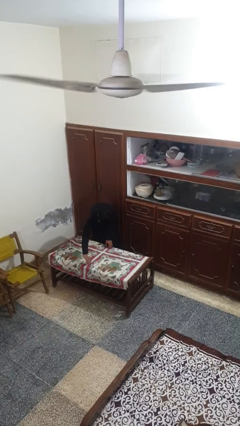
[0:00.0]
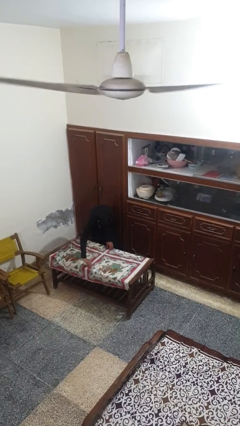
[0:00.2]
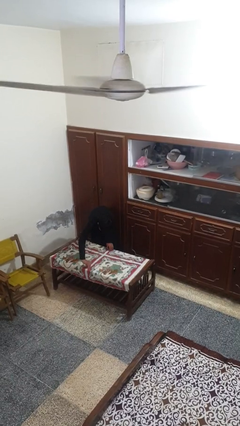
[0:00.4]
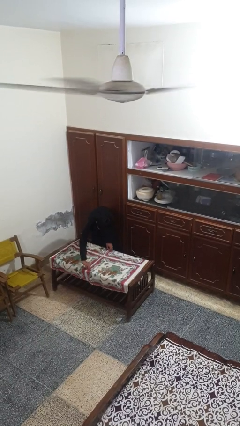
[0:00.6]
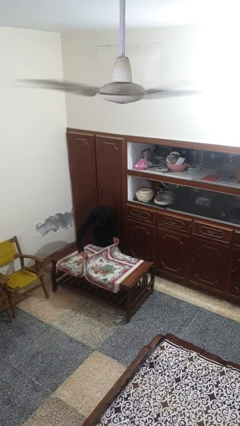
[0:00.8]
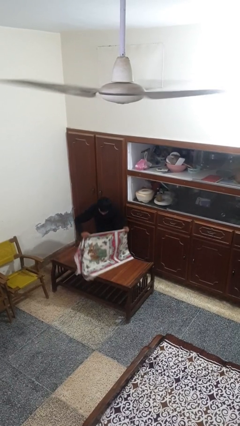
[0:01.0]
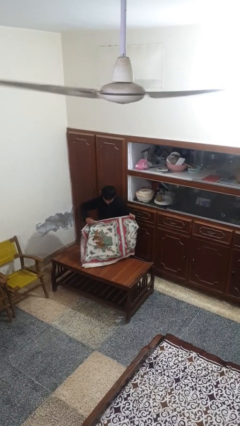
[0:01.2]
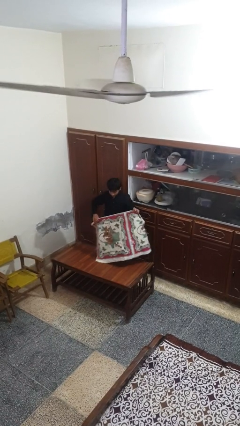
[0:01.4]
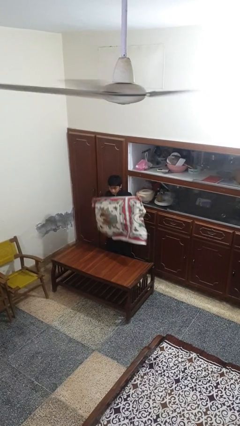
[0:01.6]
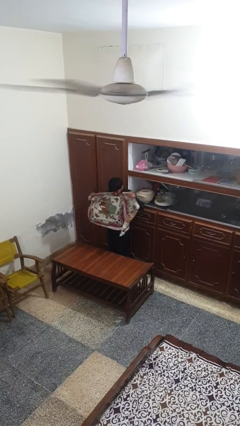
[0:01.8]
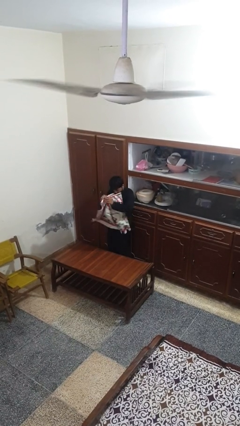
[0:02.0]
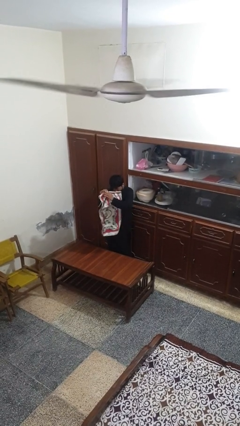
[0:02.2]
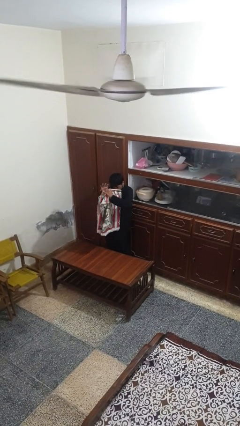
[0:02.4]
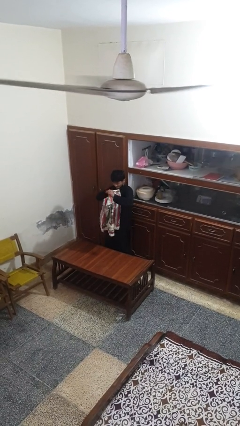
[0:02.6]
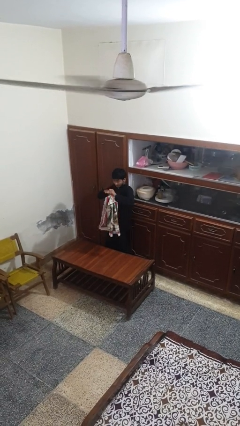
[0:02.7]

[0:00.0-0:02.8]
person folds tablecloth

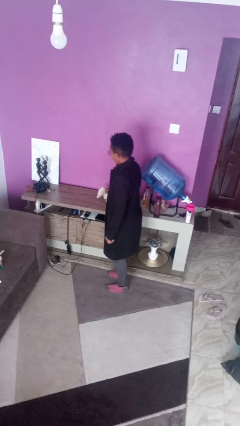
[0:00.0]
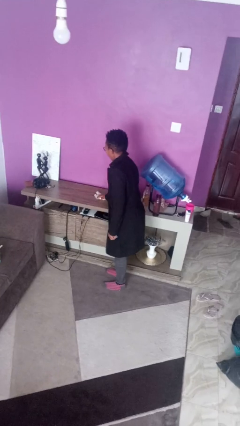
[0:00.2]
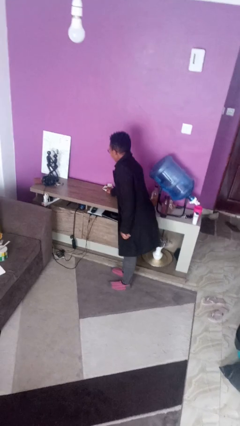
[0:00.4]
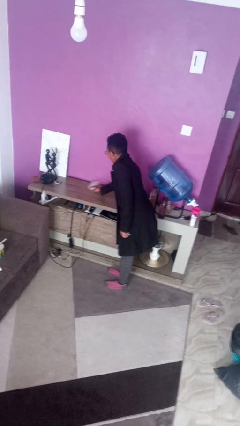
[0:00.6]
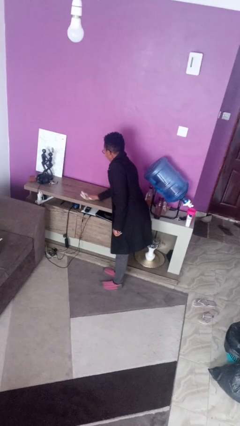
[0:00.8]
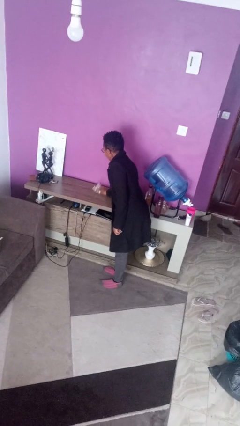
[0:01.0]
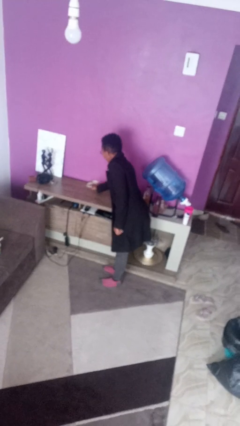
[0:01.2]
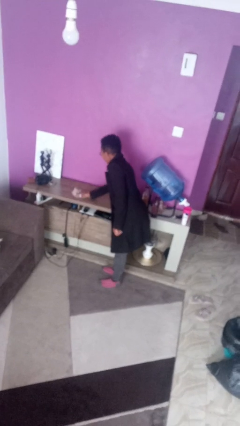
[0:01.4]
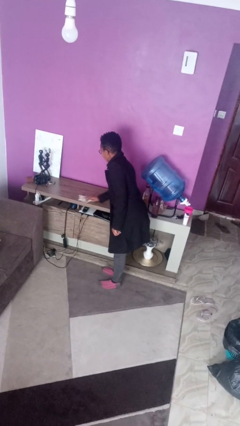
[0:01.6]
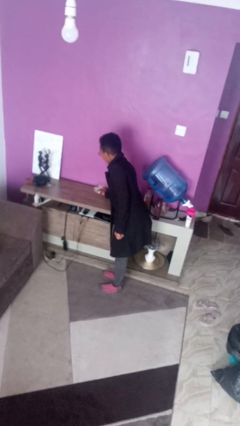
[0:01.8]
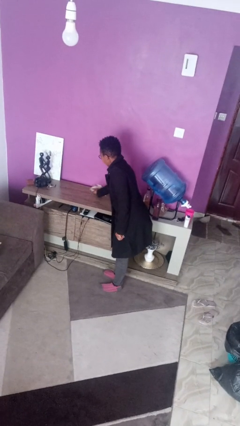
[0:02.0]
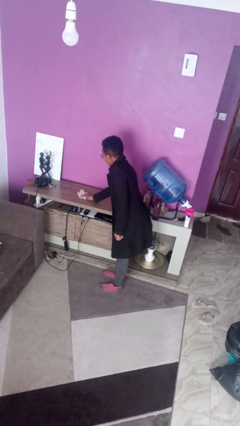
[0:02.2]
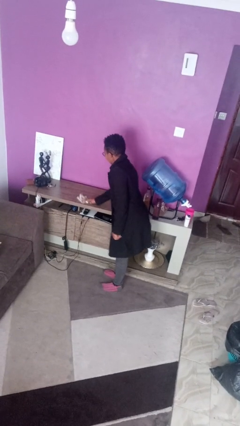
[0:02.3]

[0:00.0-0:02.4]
person cleans table with rag

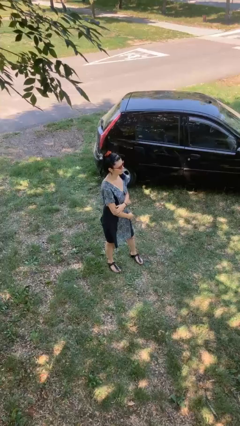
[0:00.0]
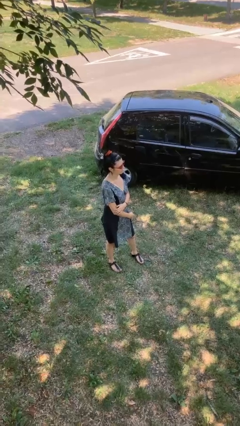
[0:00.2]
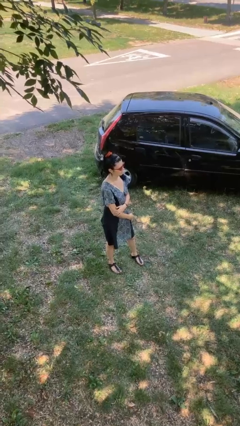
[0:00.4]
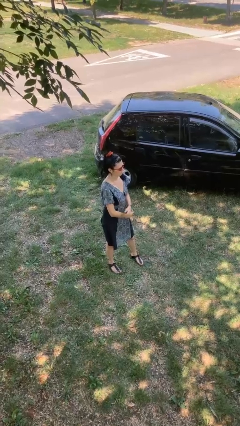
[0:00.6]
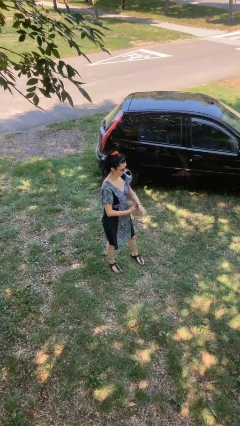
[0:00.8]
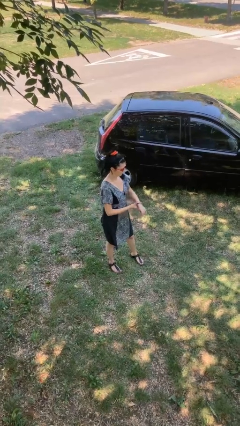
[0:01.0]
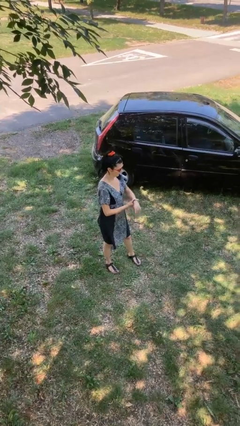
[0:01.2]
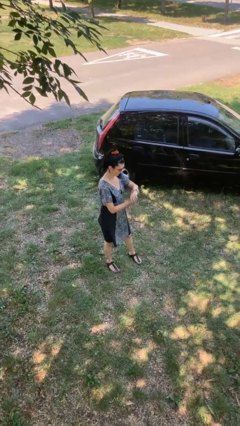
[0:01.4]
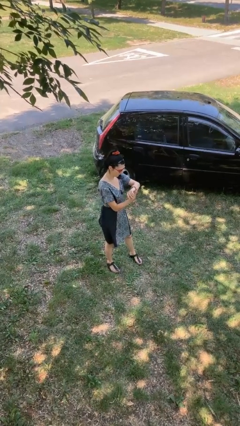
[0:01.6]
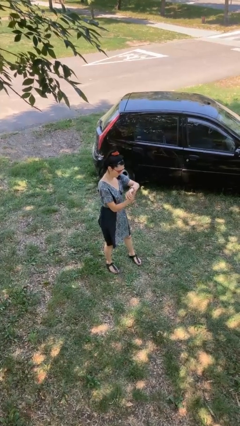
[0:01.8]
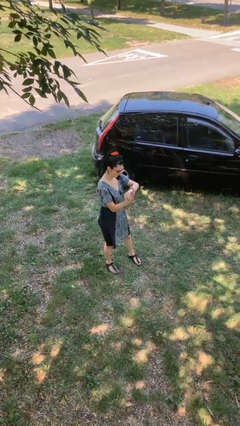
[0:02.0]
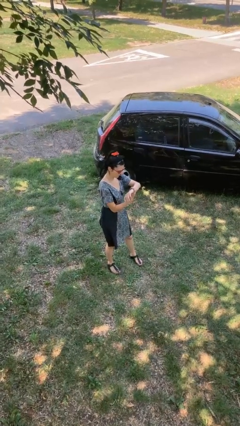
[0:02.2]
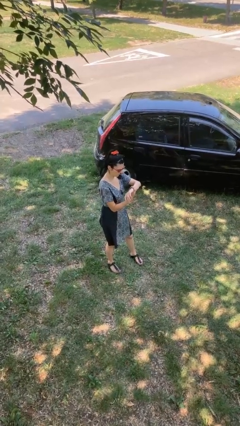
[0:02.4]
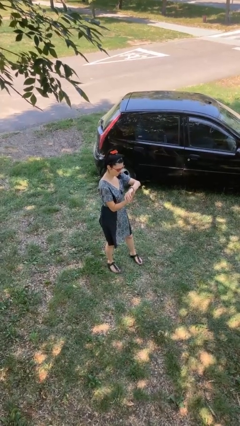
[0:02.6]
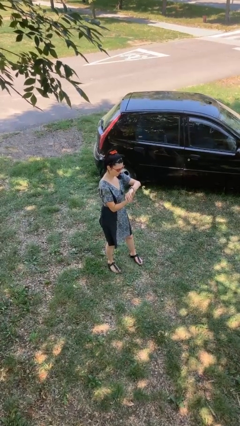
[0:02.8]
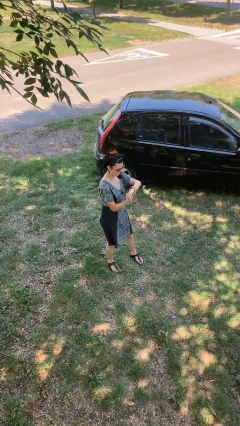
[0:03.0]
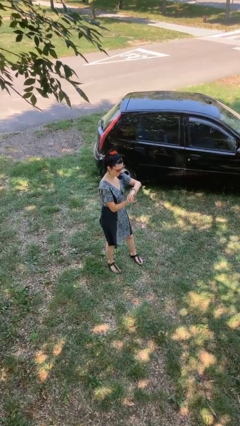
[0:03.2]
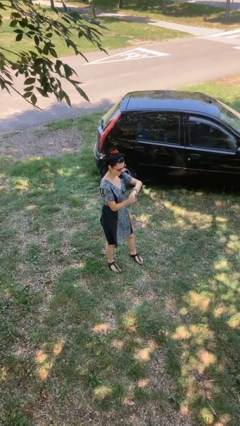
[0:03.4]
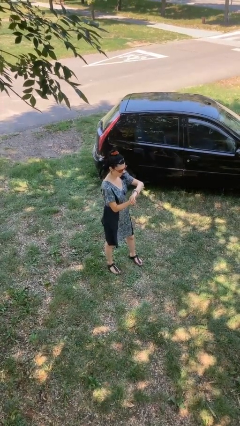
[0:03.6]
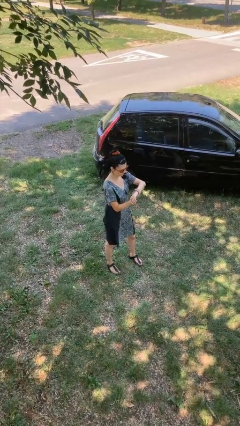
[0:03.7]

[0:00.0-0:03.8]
person looks at wristwatch

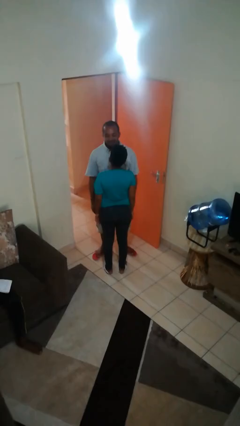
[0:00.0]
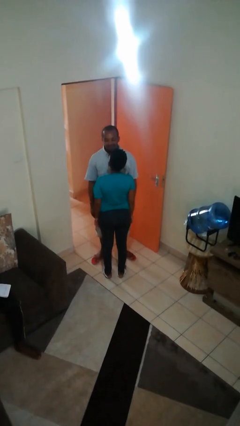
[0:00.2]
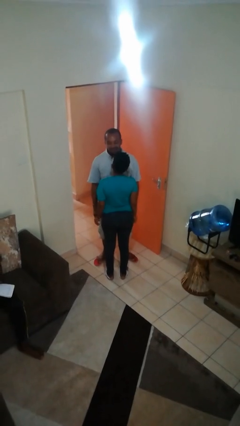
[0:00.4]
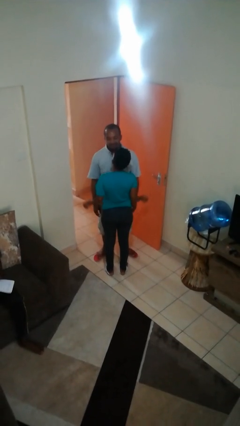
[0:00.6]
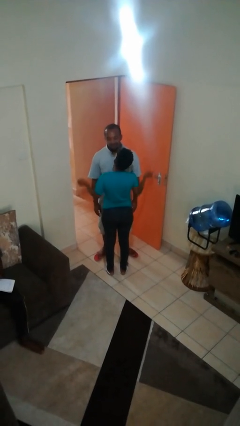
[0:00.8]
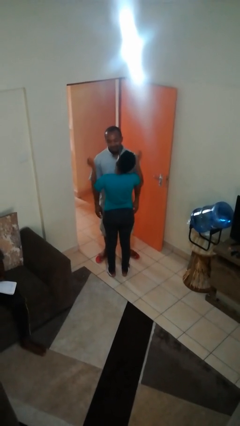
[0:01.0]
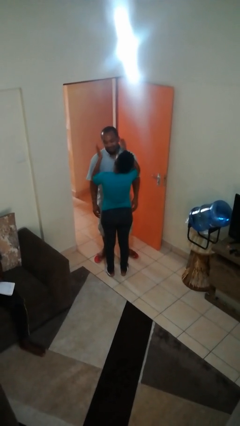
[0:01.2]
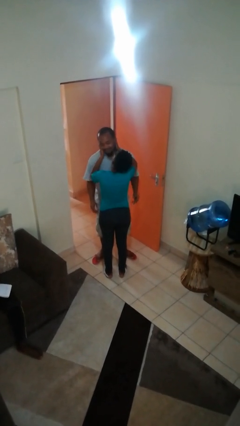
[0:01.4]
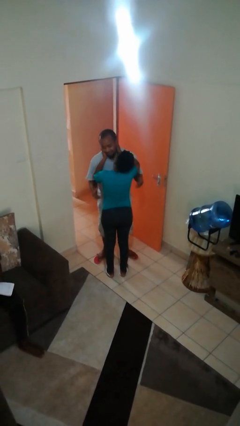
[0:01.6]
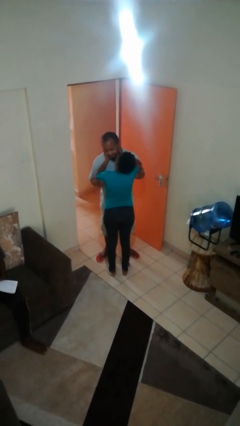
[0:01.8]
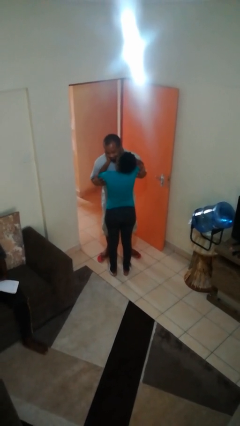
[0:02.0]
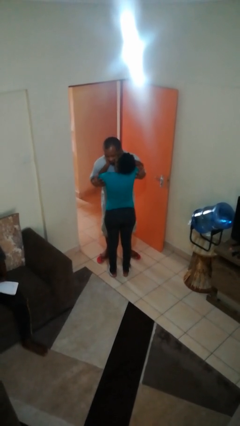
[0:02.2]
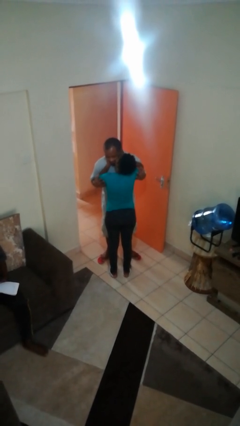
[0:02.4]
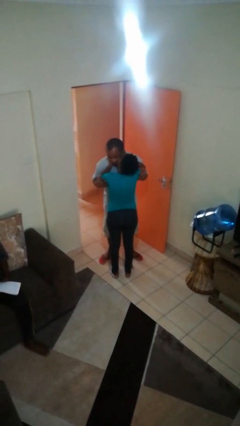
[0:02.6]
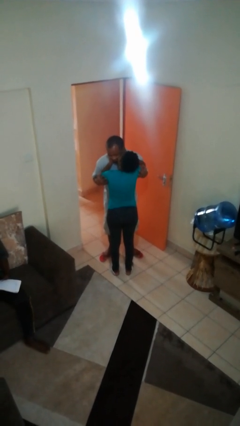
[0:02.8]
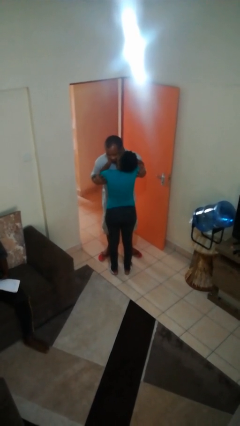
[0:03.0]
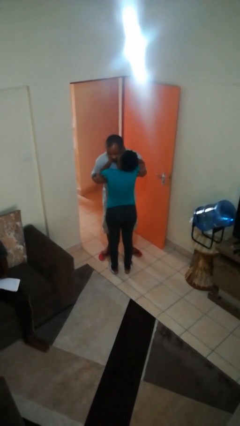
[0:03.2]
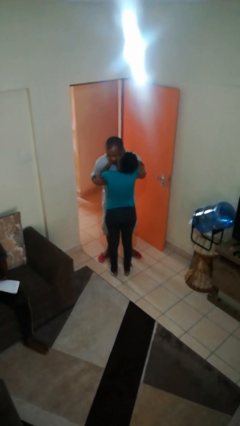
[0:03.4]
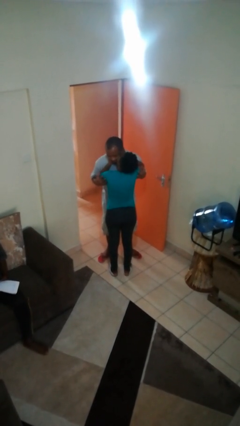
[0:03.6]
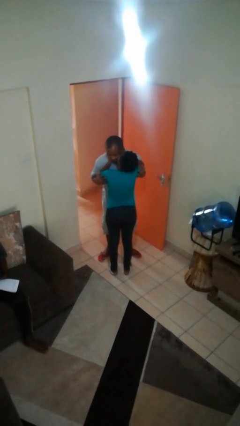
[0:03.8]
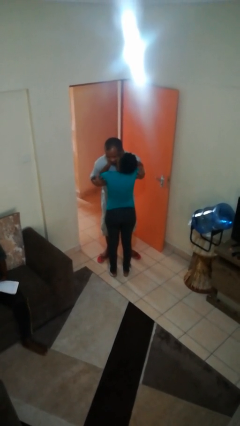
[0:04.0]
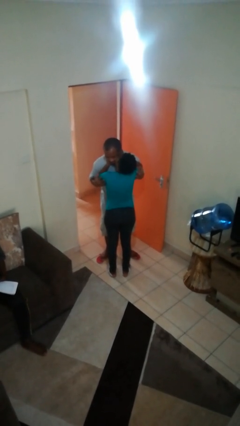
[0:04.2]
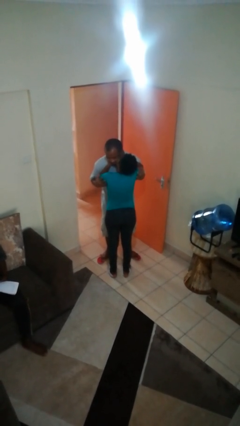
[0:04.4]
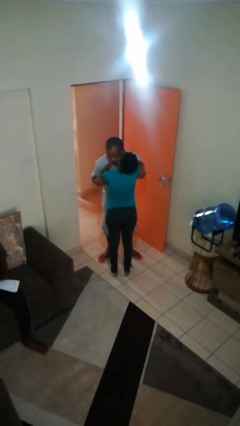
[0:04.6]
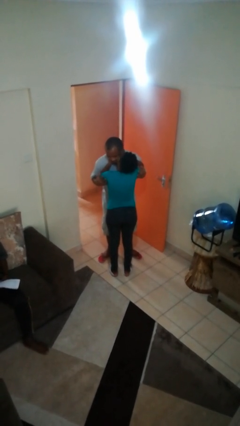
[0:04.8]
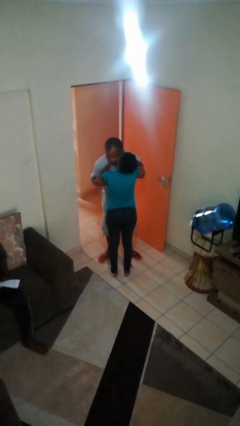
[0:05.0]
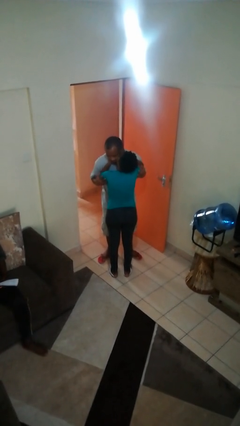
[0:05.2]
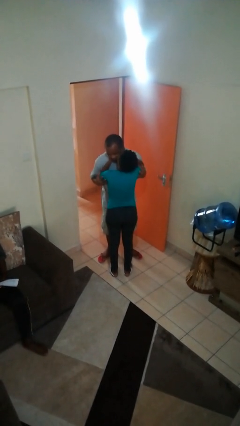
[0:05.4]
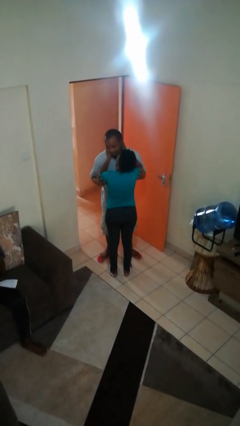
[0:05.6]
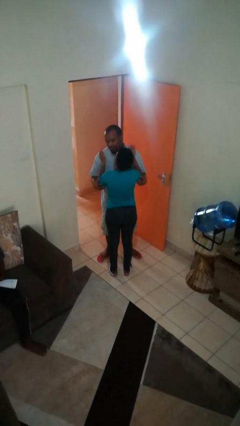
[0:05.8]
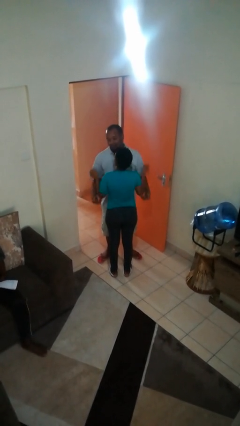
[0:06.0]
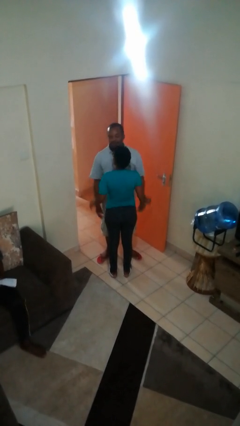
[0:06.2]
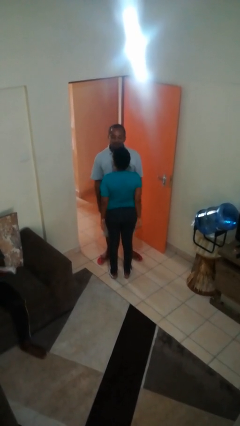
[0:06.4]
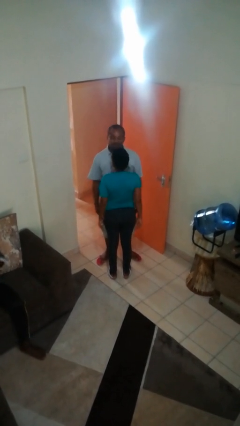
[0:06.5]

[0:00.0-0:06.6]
person kisses cheek of person

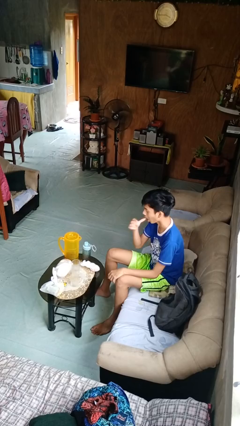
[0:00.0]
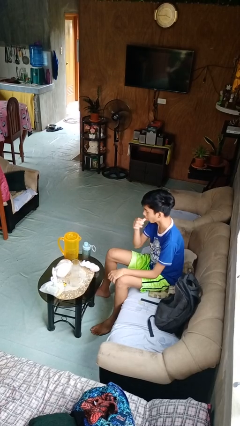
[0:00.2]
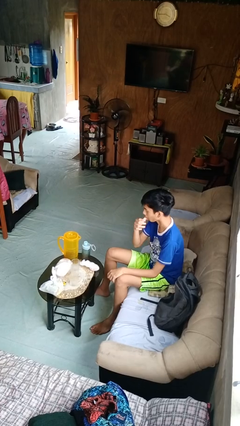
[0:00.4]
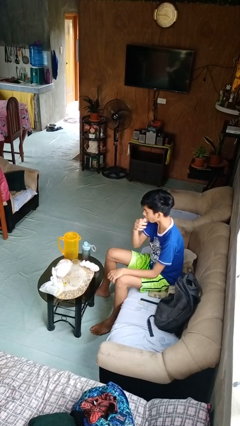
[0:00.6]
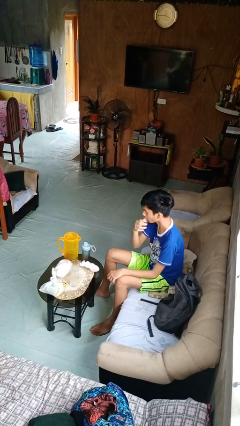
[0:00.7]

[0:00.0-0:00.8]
person licks fingers

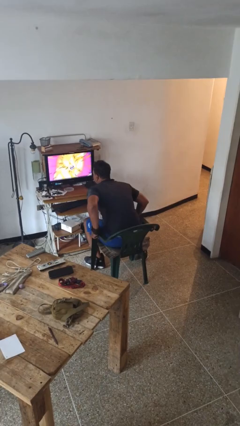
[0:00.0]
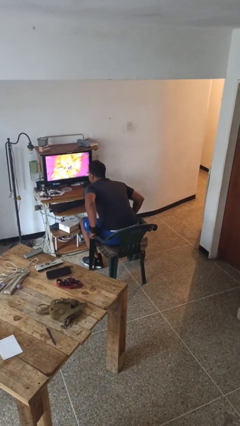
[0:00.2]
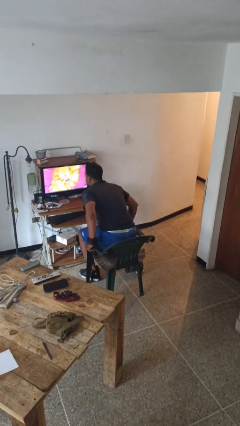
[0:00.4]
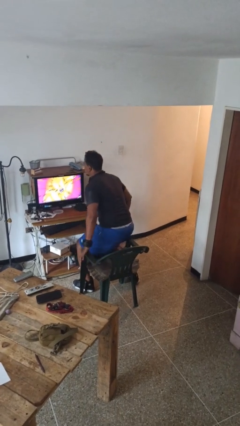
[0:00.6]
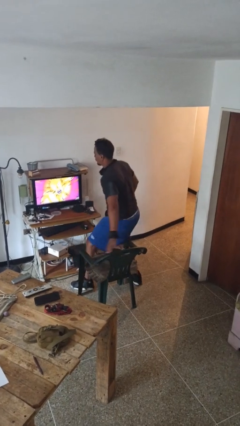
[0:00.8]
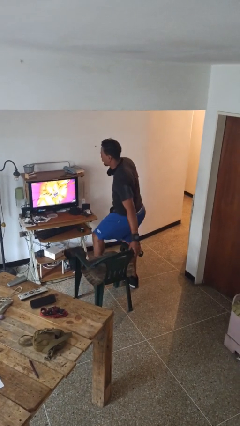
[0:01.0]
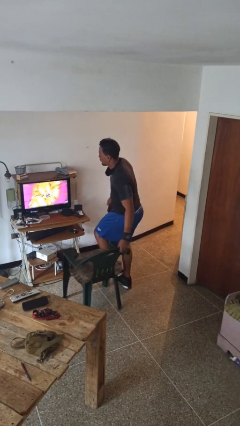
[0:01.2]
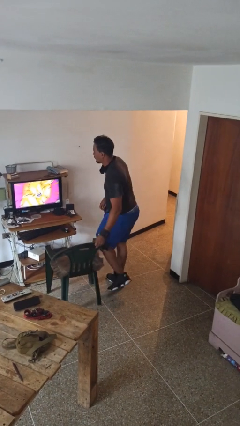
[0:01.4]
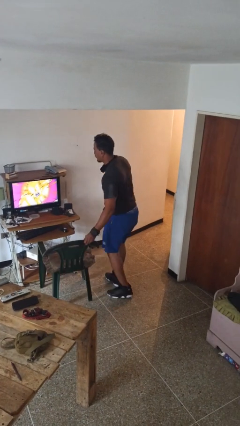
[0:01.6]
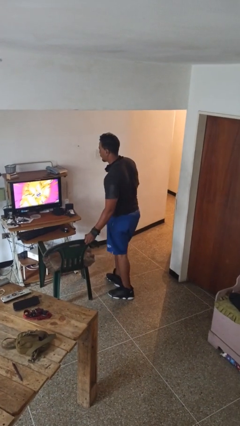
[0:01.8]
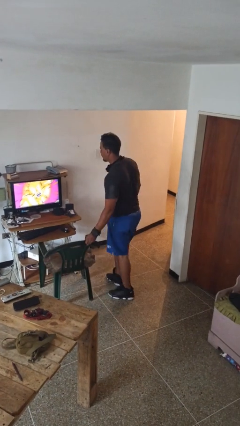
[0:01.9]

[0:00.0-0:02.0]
person stands up
